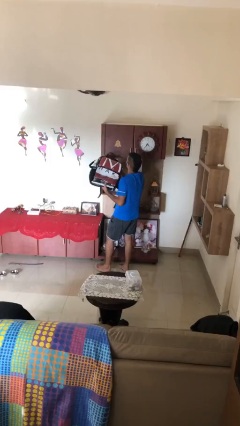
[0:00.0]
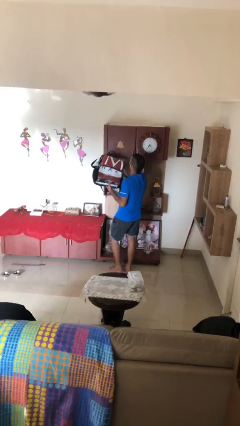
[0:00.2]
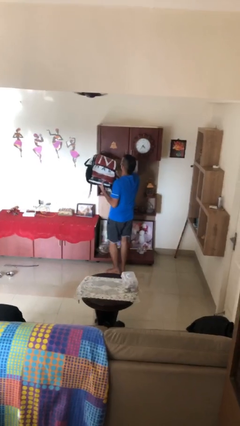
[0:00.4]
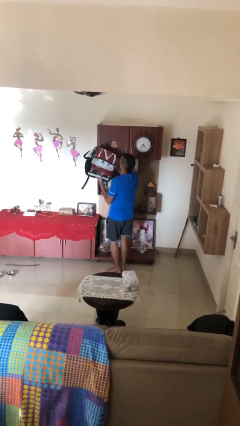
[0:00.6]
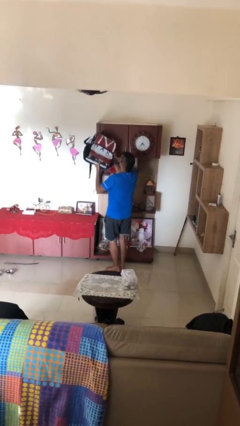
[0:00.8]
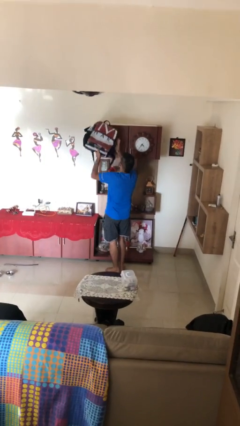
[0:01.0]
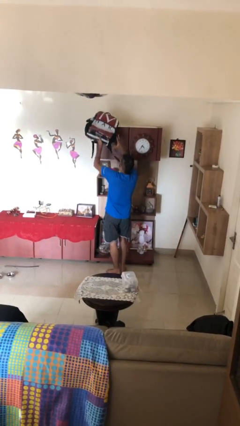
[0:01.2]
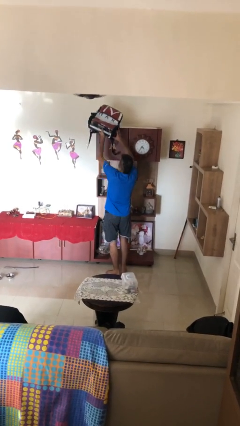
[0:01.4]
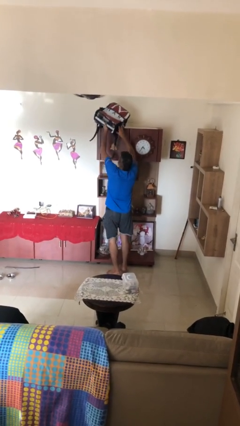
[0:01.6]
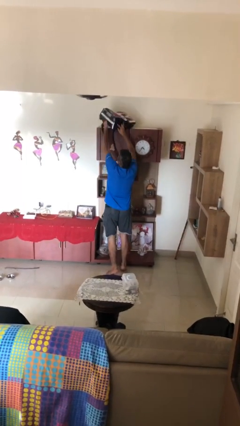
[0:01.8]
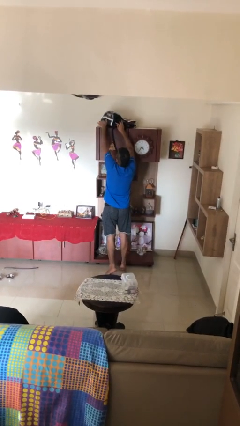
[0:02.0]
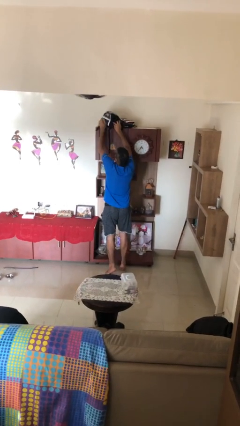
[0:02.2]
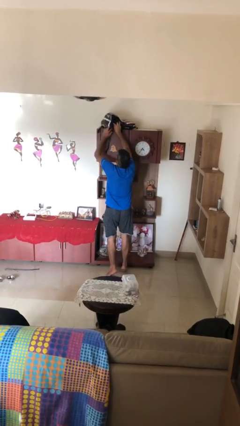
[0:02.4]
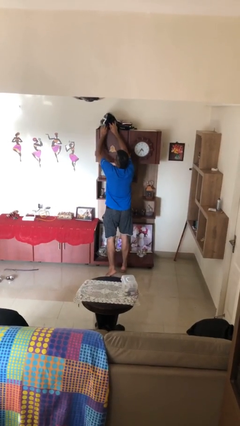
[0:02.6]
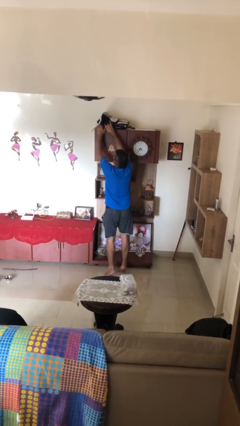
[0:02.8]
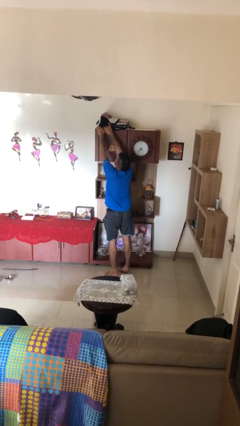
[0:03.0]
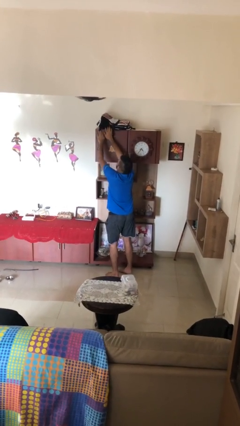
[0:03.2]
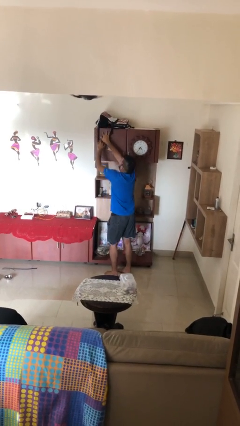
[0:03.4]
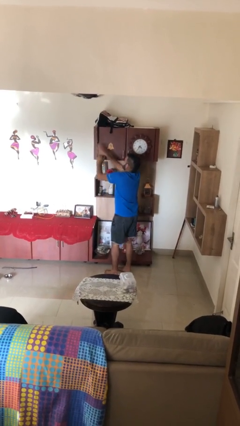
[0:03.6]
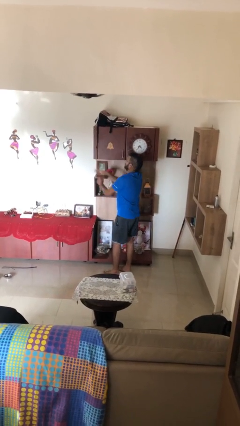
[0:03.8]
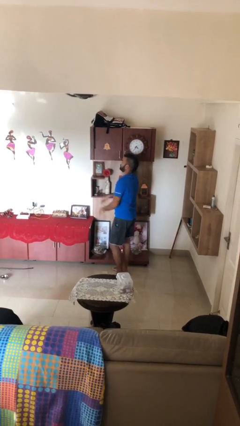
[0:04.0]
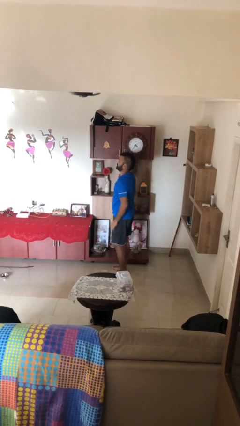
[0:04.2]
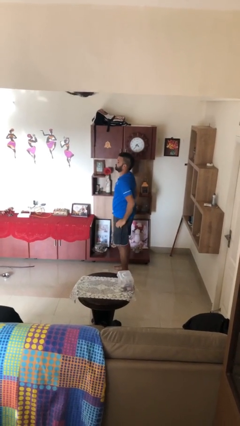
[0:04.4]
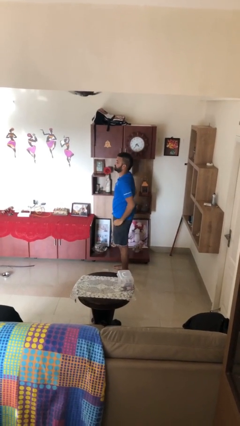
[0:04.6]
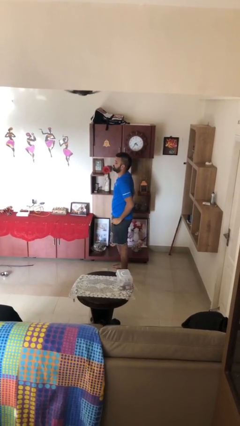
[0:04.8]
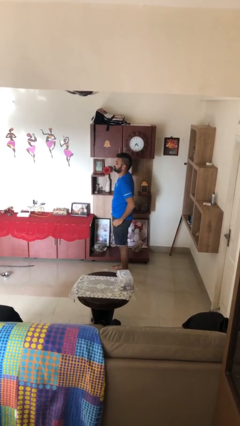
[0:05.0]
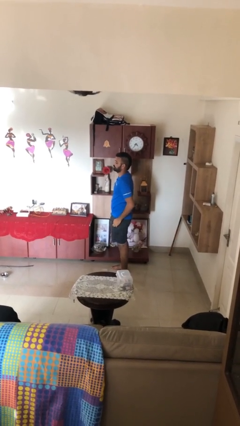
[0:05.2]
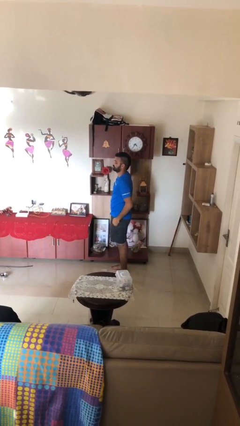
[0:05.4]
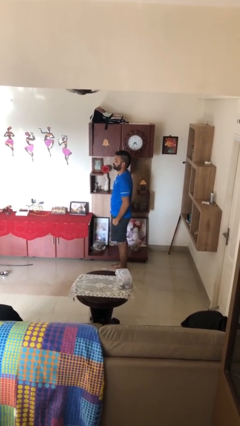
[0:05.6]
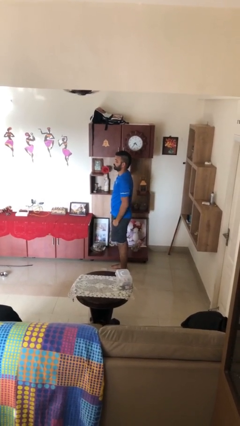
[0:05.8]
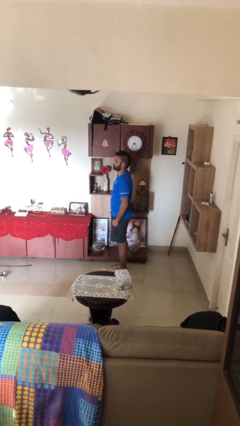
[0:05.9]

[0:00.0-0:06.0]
person puts down object on shelf

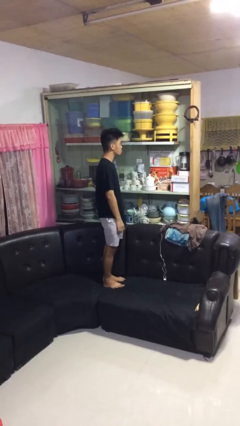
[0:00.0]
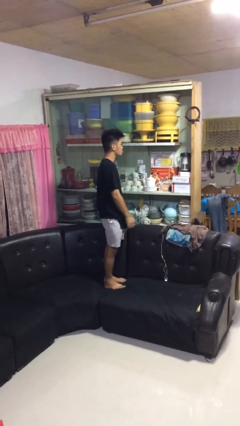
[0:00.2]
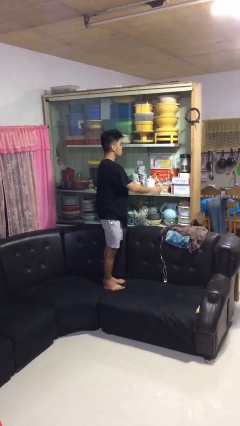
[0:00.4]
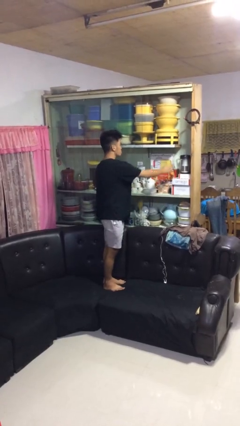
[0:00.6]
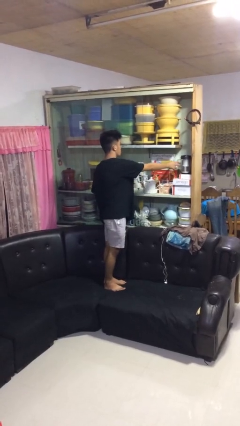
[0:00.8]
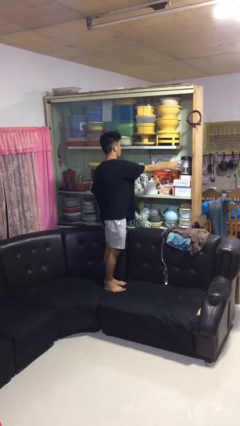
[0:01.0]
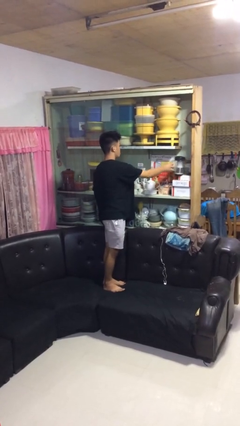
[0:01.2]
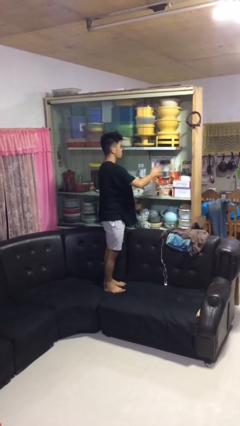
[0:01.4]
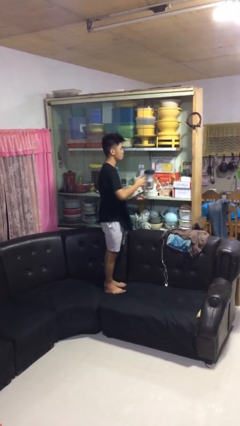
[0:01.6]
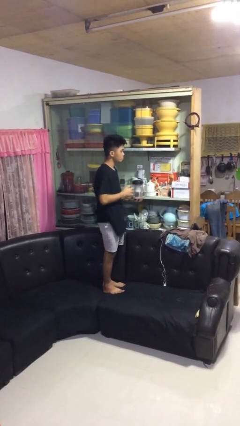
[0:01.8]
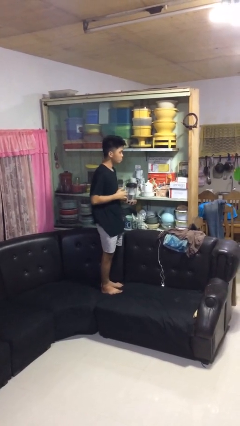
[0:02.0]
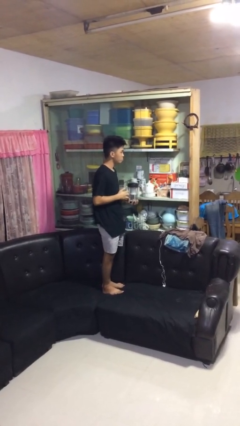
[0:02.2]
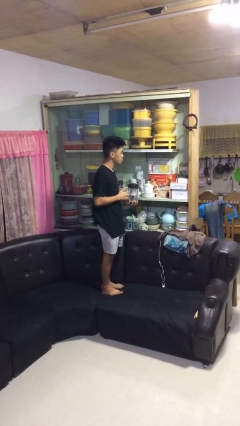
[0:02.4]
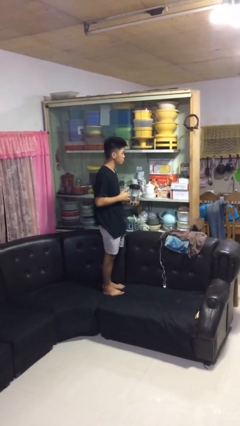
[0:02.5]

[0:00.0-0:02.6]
person picks up object from cabinet

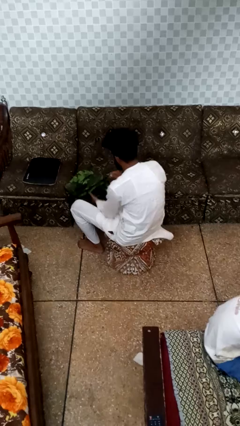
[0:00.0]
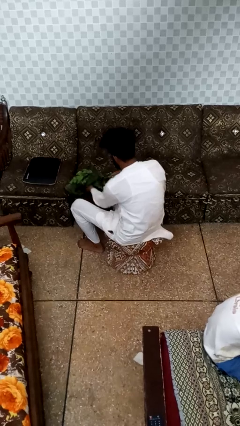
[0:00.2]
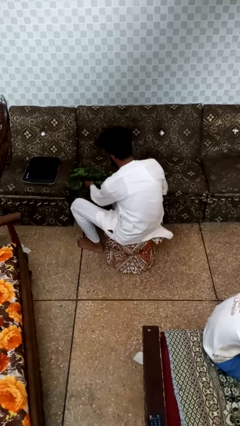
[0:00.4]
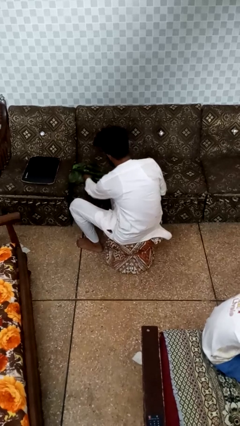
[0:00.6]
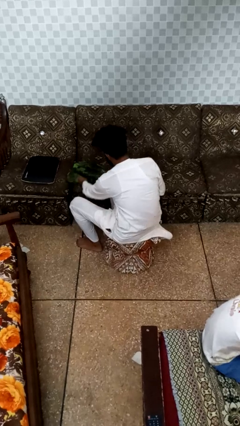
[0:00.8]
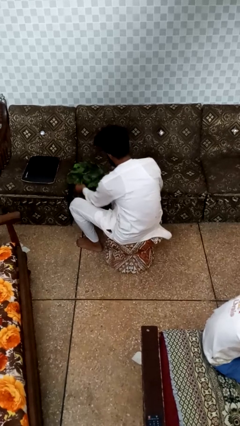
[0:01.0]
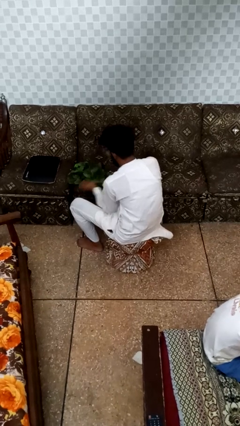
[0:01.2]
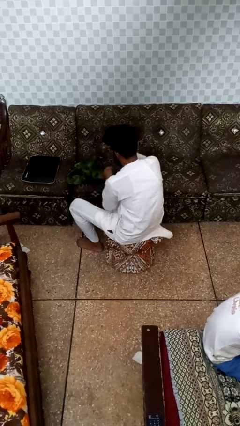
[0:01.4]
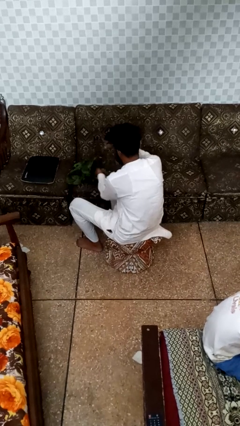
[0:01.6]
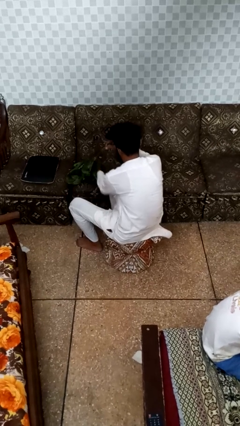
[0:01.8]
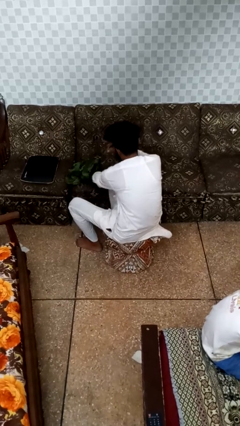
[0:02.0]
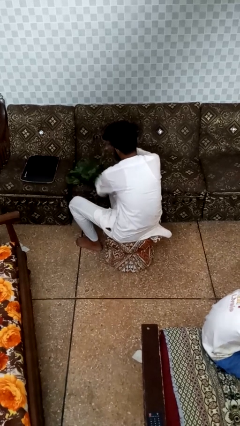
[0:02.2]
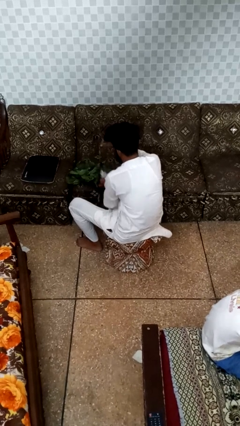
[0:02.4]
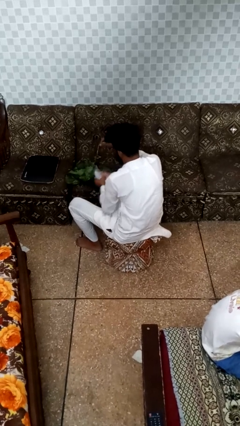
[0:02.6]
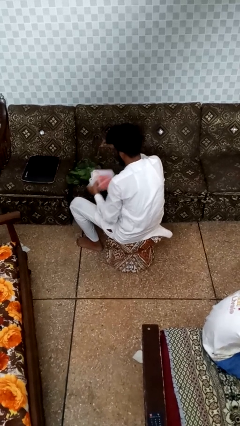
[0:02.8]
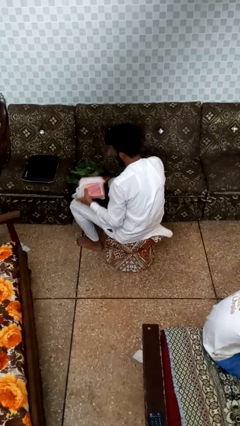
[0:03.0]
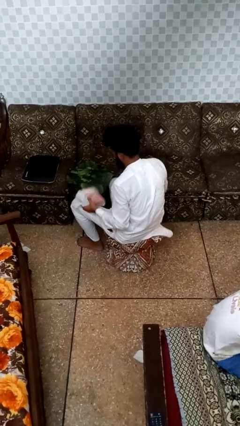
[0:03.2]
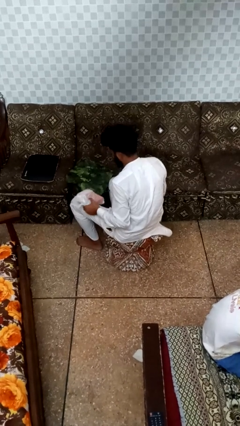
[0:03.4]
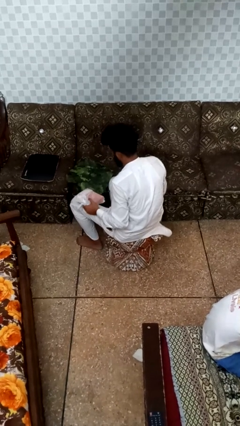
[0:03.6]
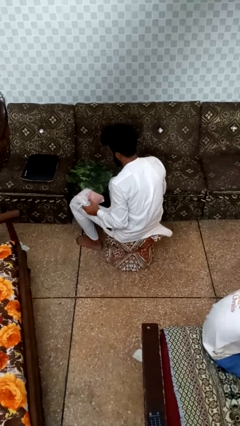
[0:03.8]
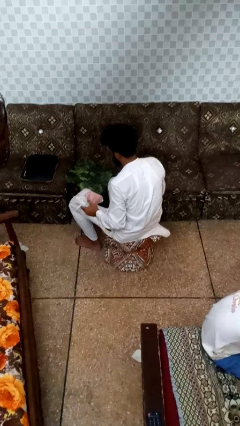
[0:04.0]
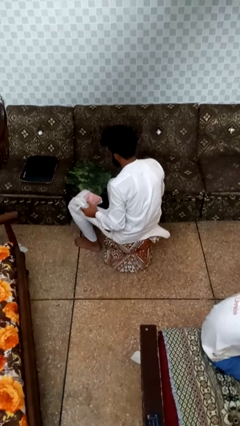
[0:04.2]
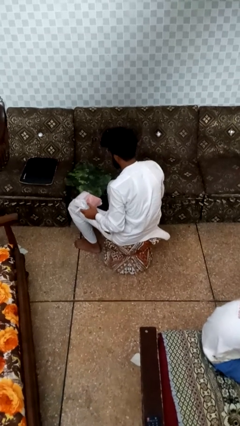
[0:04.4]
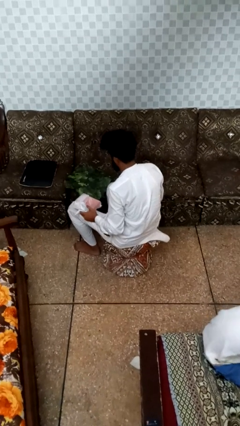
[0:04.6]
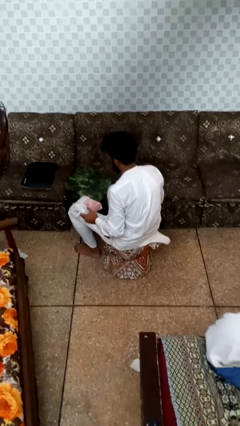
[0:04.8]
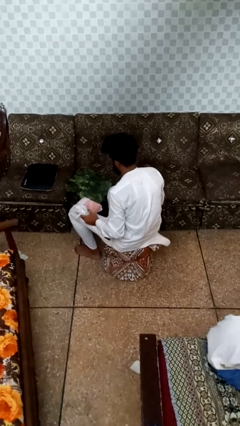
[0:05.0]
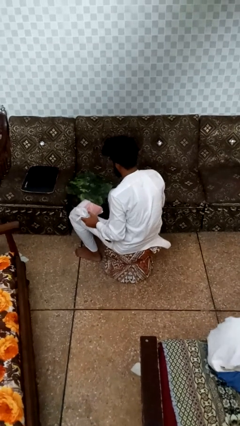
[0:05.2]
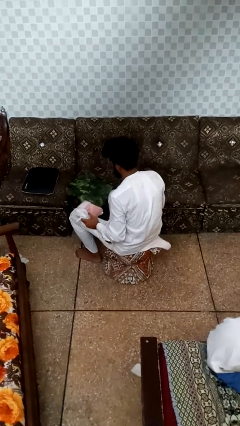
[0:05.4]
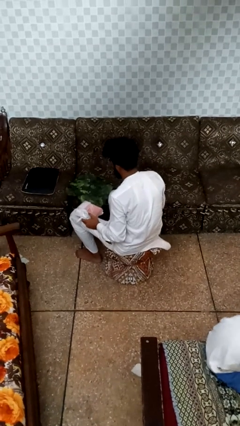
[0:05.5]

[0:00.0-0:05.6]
person takes object from bag

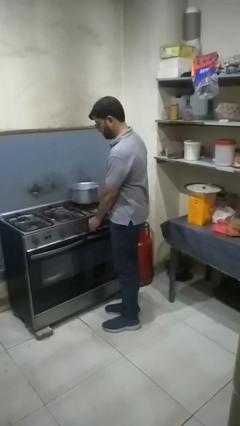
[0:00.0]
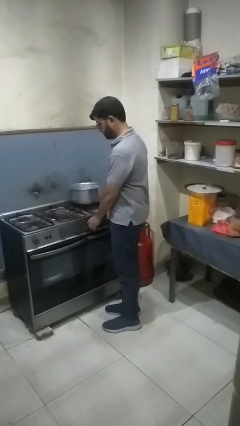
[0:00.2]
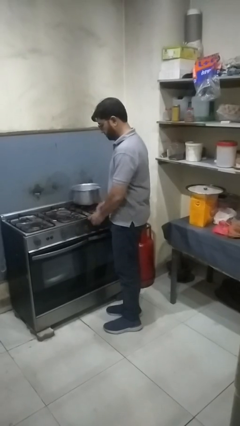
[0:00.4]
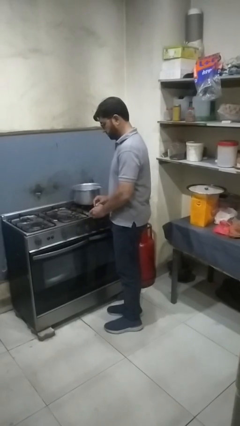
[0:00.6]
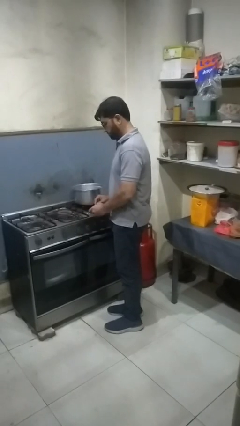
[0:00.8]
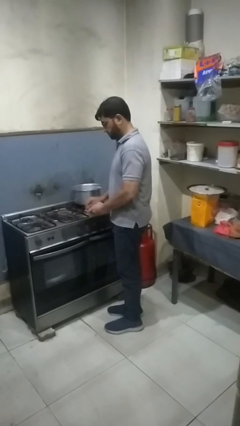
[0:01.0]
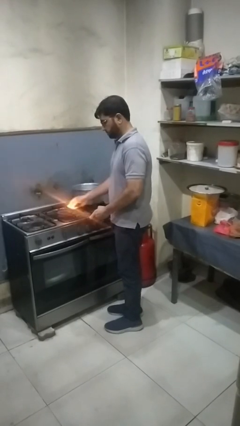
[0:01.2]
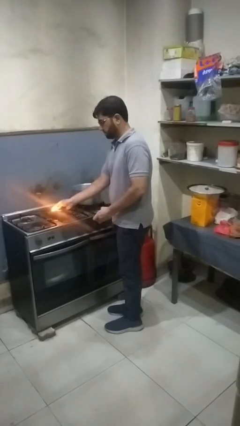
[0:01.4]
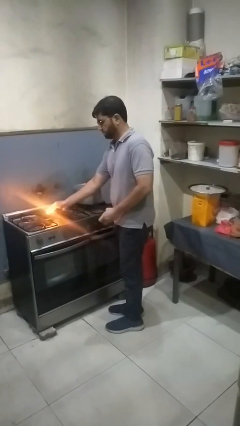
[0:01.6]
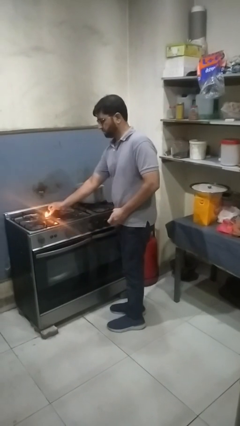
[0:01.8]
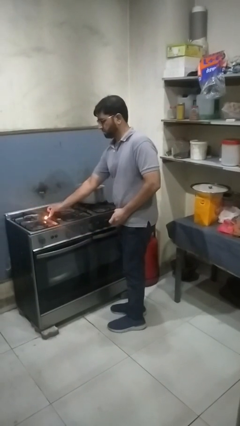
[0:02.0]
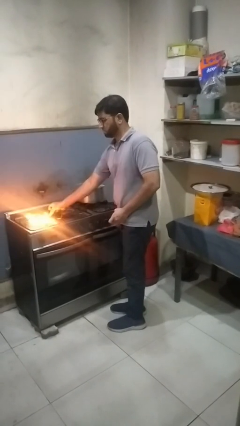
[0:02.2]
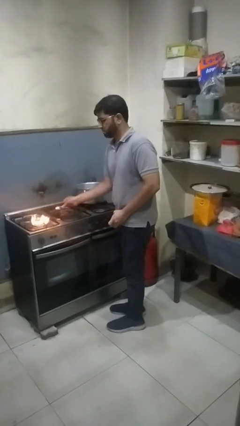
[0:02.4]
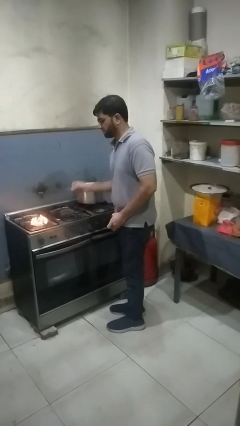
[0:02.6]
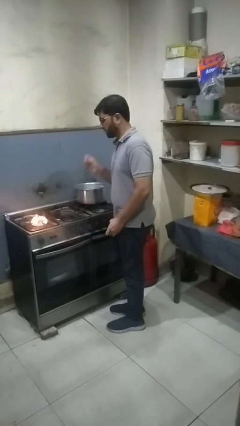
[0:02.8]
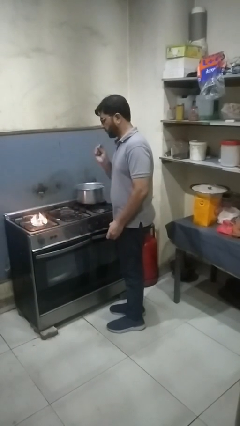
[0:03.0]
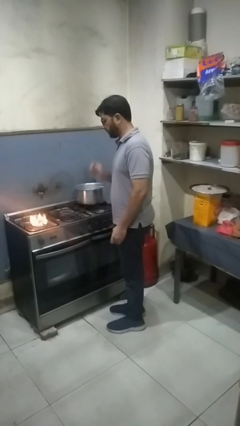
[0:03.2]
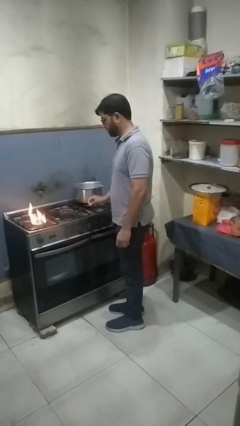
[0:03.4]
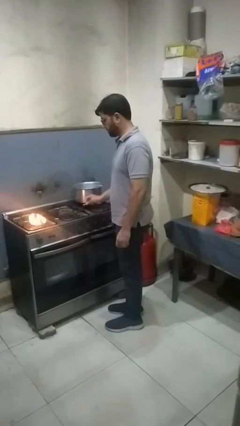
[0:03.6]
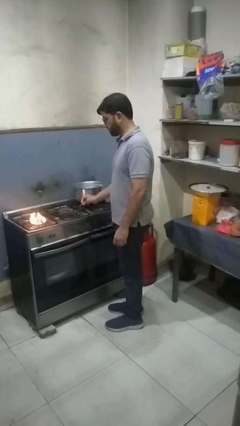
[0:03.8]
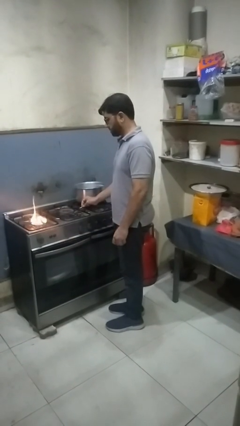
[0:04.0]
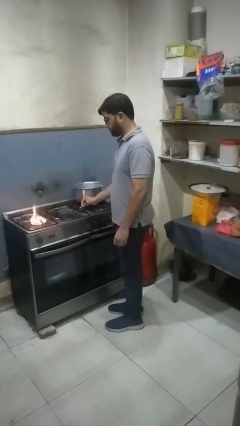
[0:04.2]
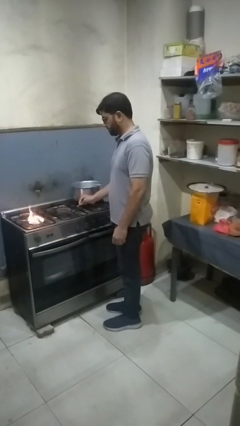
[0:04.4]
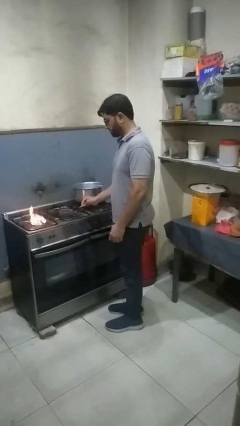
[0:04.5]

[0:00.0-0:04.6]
person turns on stovetop
